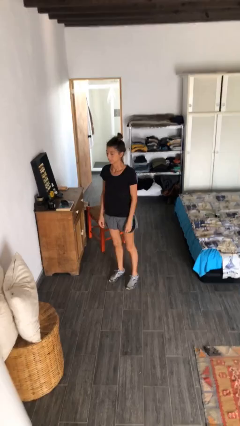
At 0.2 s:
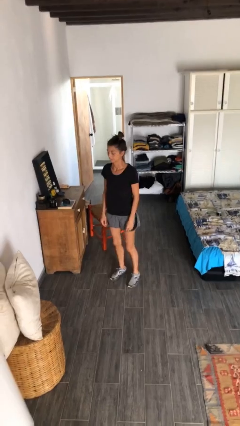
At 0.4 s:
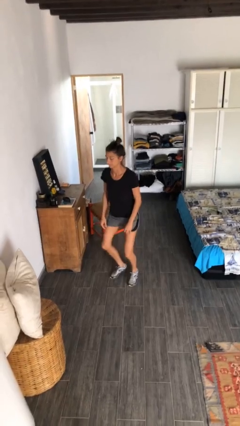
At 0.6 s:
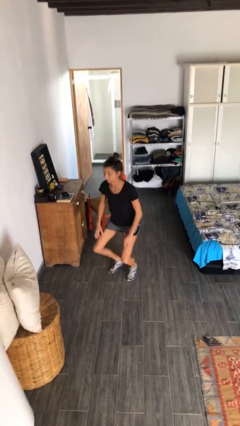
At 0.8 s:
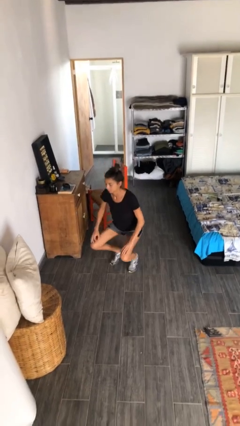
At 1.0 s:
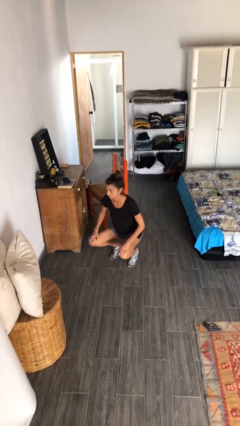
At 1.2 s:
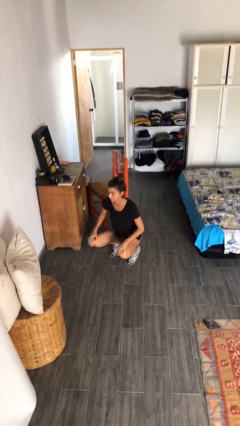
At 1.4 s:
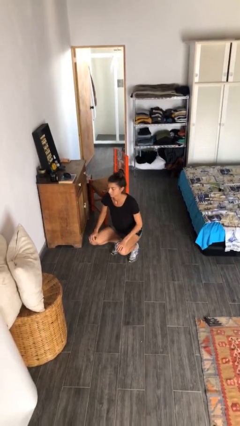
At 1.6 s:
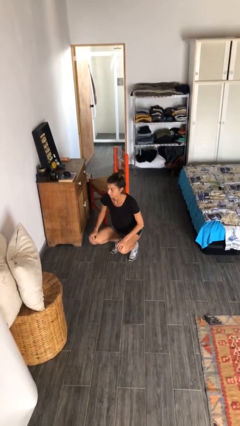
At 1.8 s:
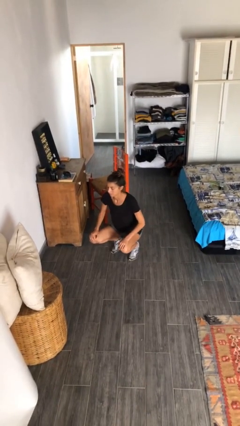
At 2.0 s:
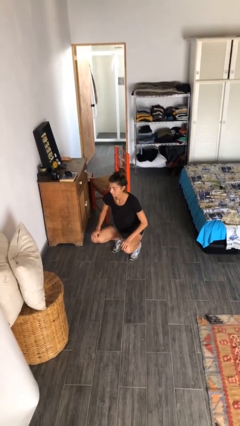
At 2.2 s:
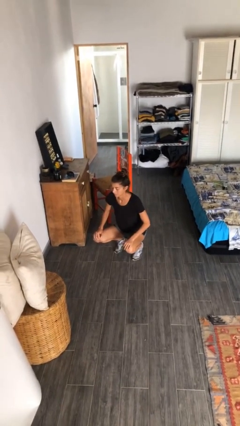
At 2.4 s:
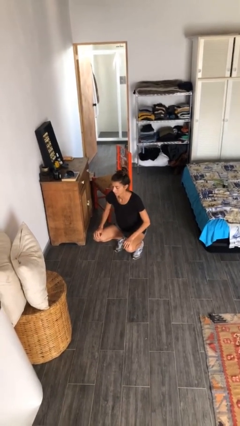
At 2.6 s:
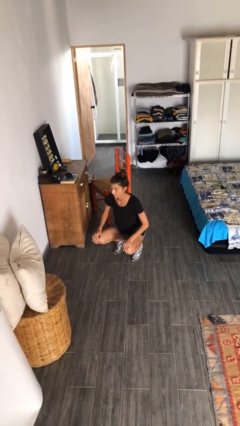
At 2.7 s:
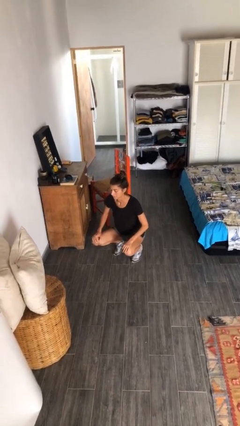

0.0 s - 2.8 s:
person squats

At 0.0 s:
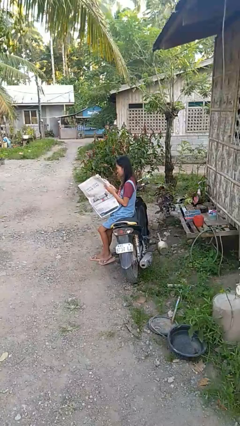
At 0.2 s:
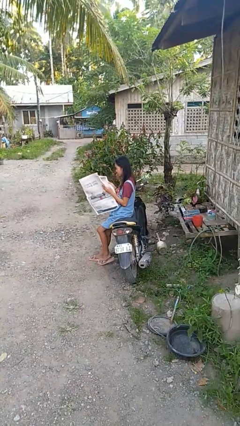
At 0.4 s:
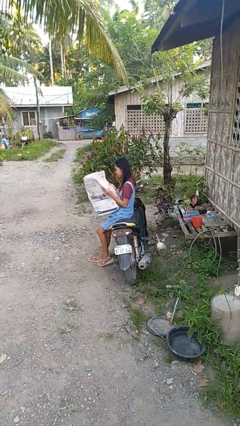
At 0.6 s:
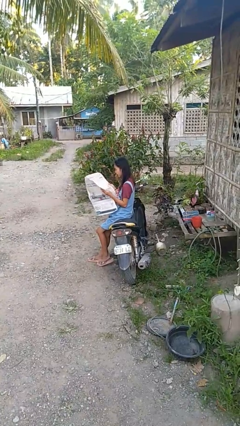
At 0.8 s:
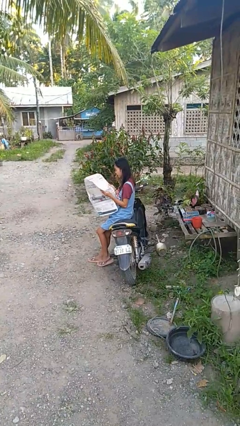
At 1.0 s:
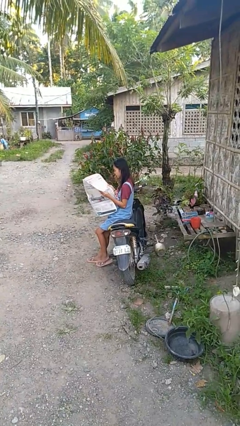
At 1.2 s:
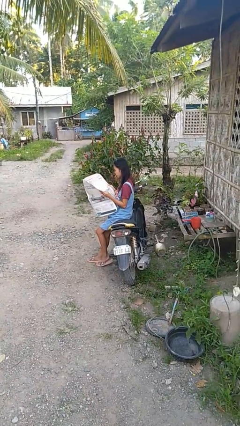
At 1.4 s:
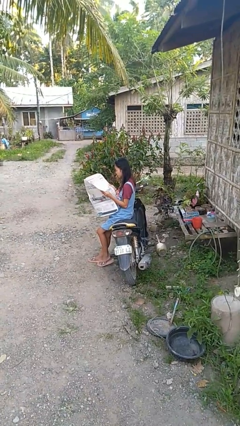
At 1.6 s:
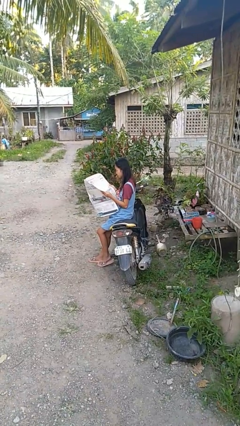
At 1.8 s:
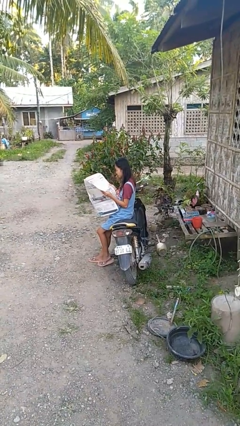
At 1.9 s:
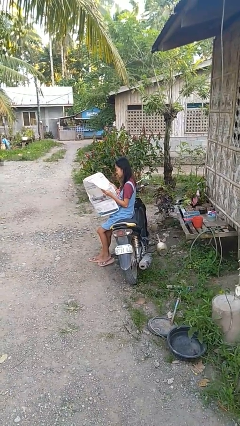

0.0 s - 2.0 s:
person reads newspaper

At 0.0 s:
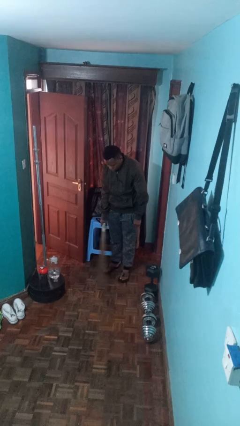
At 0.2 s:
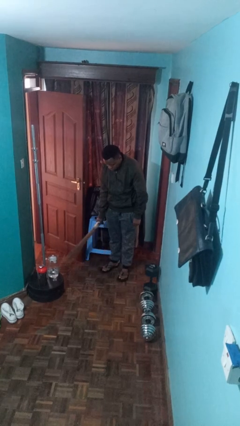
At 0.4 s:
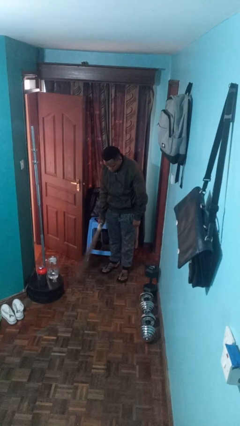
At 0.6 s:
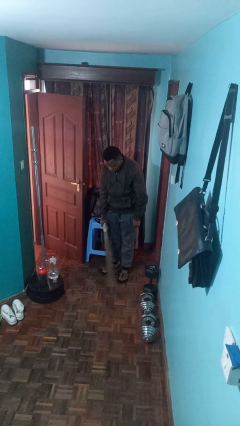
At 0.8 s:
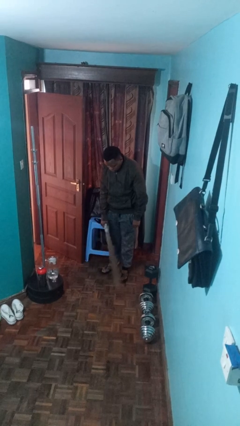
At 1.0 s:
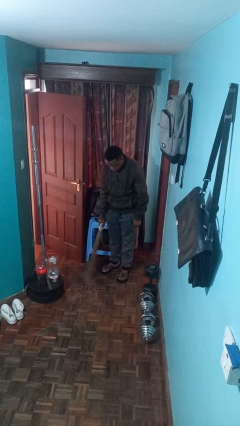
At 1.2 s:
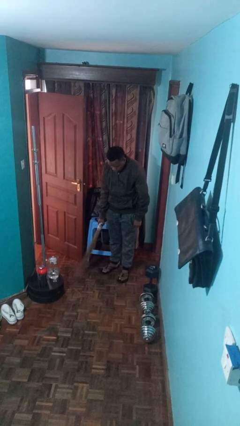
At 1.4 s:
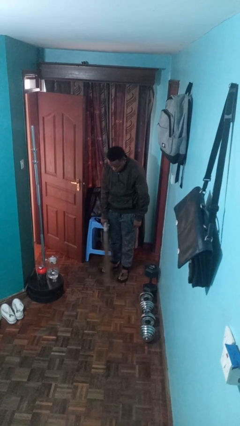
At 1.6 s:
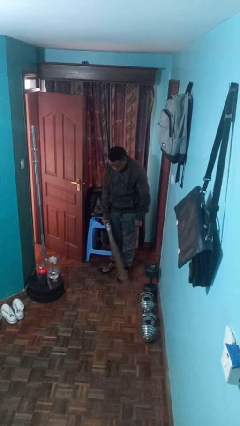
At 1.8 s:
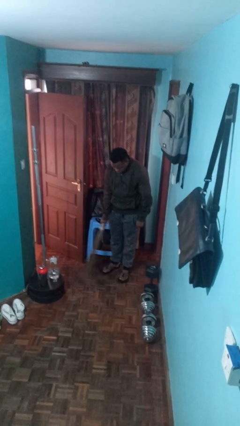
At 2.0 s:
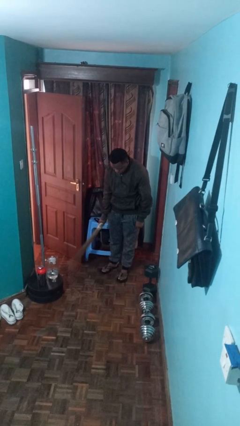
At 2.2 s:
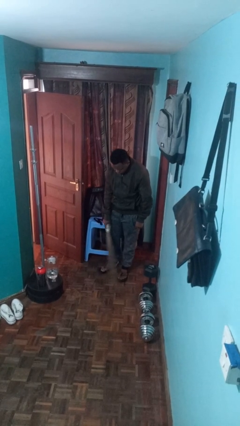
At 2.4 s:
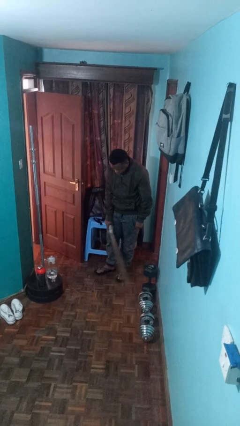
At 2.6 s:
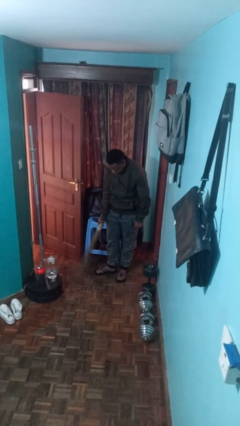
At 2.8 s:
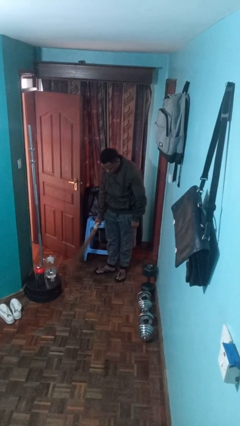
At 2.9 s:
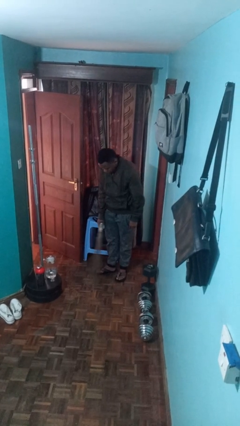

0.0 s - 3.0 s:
person sweeps floor

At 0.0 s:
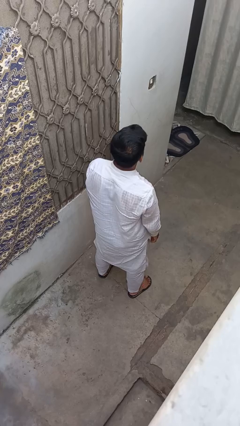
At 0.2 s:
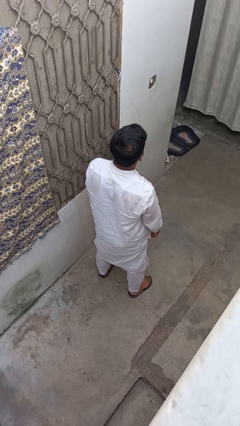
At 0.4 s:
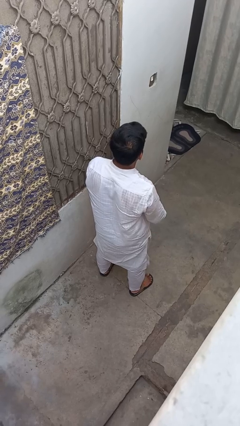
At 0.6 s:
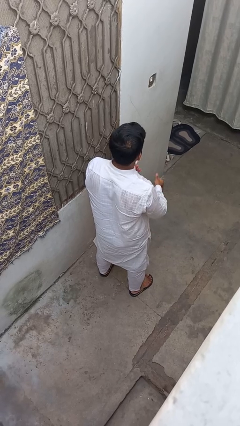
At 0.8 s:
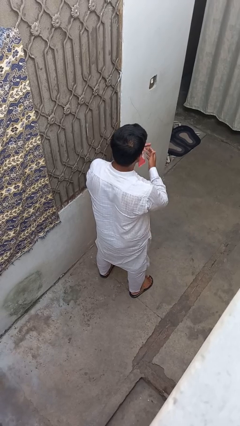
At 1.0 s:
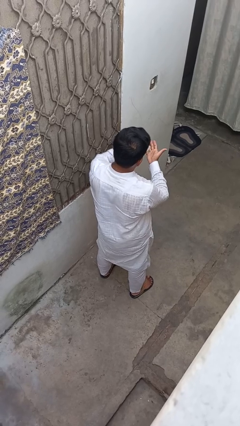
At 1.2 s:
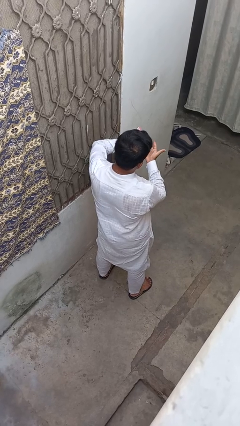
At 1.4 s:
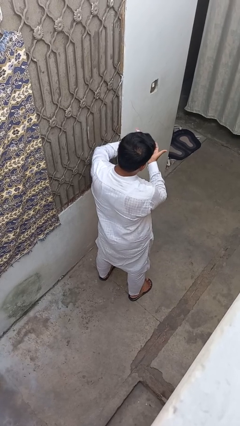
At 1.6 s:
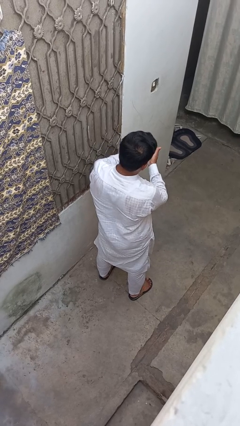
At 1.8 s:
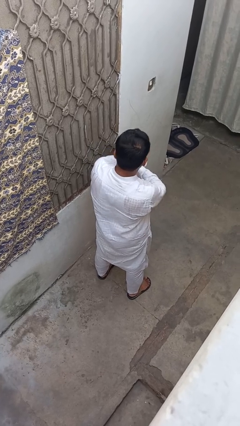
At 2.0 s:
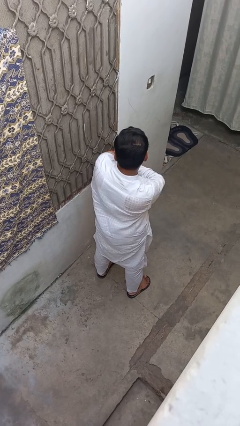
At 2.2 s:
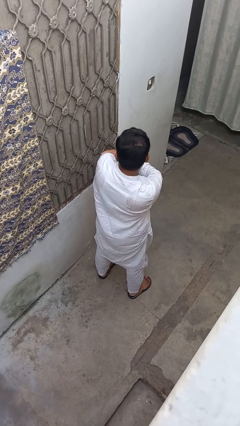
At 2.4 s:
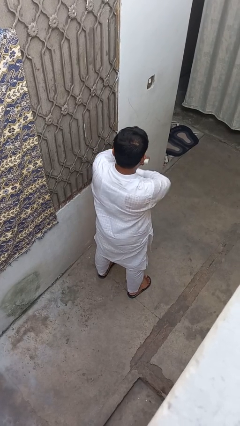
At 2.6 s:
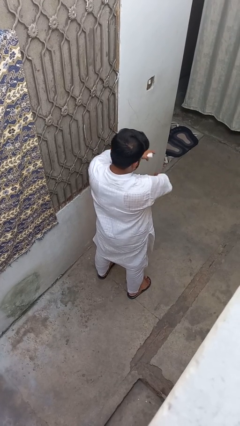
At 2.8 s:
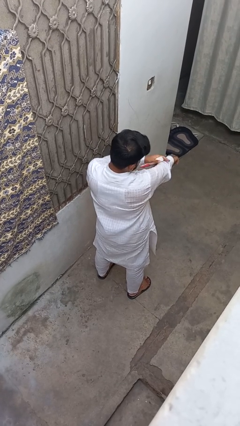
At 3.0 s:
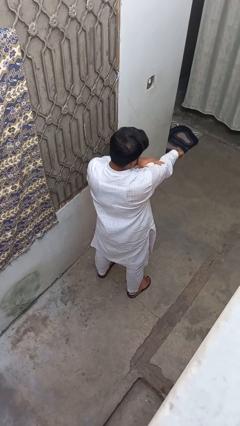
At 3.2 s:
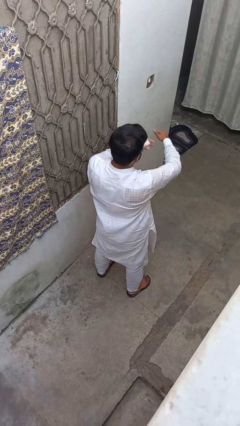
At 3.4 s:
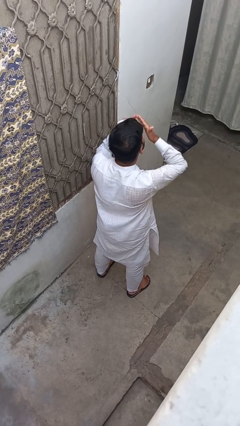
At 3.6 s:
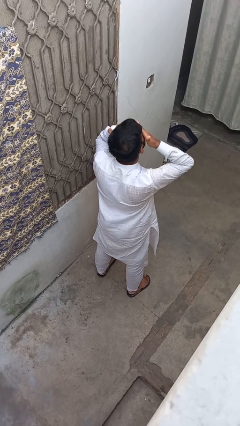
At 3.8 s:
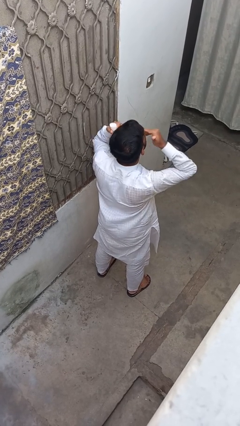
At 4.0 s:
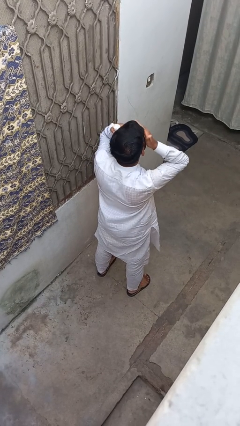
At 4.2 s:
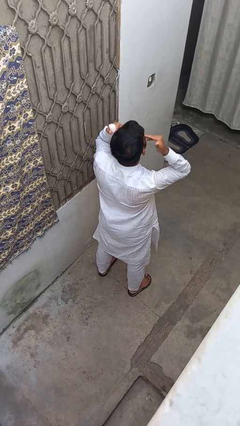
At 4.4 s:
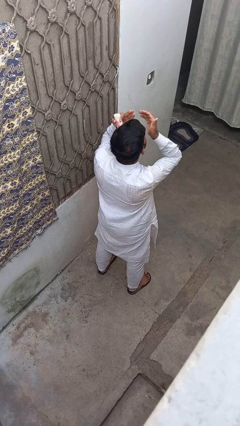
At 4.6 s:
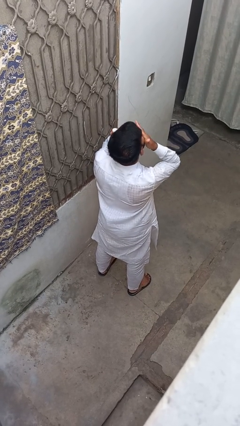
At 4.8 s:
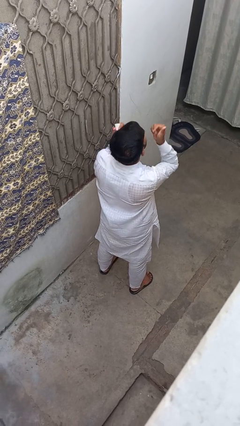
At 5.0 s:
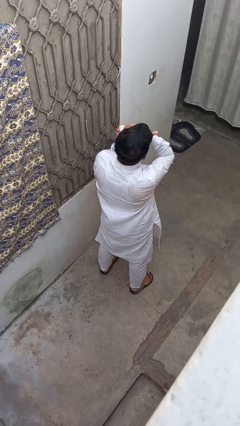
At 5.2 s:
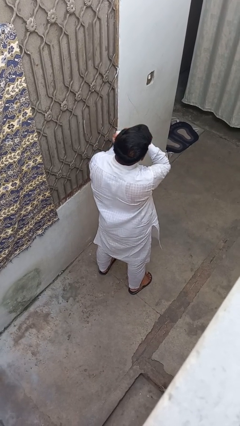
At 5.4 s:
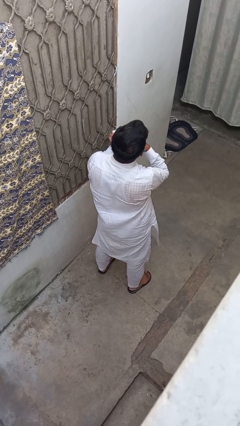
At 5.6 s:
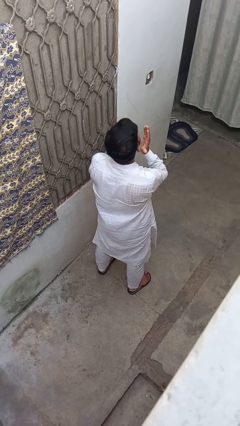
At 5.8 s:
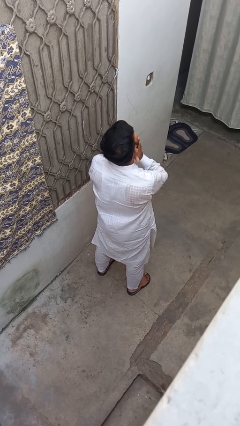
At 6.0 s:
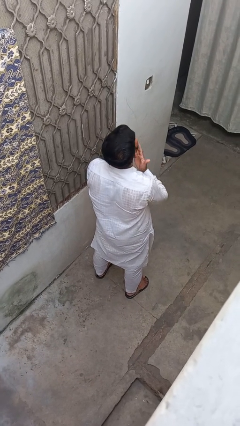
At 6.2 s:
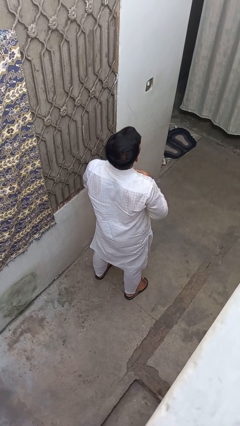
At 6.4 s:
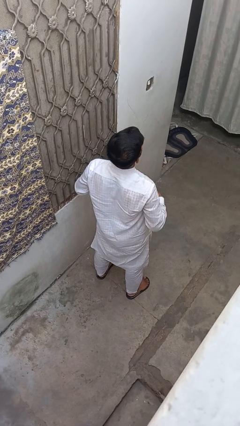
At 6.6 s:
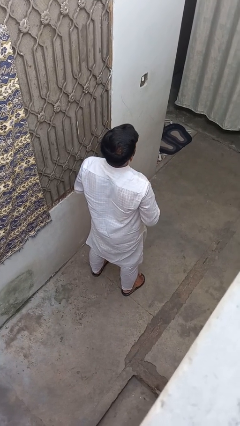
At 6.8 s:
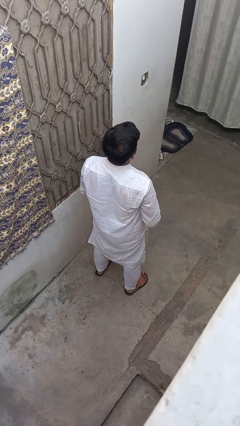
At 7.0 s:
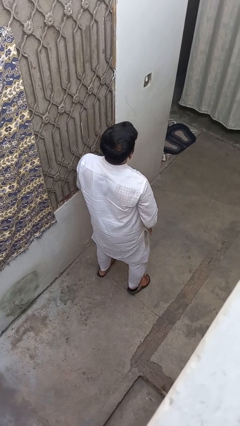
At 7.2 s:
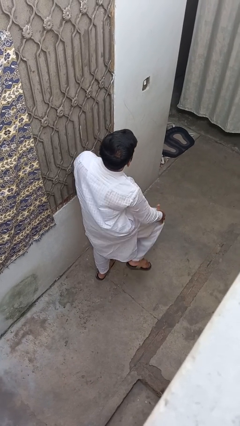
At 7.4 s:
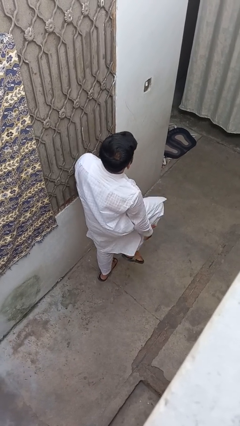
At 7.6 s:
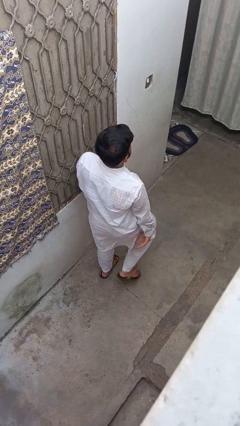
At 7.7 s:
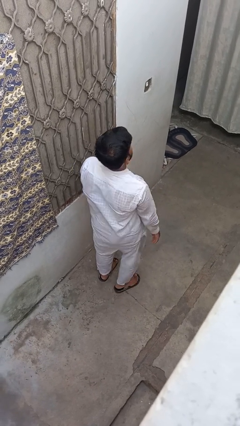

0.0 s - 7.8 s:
person applies sunscreen

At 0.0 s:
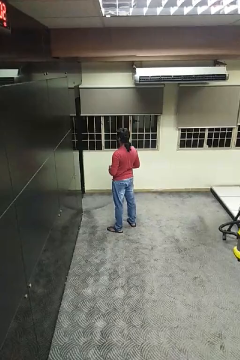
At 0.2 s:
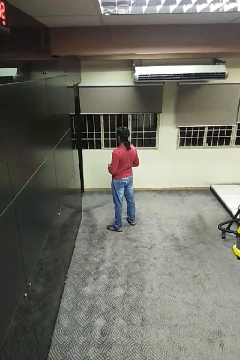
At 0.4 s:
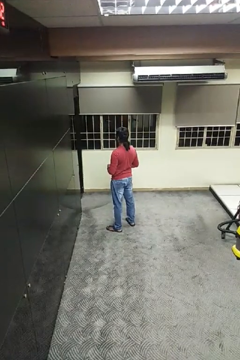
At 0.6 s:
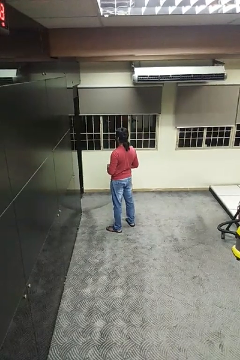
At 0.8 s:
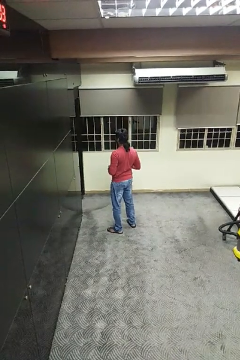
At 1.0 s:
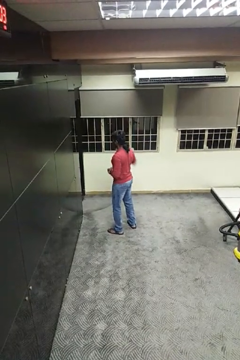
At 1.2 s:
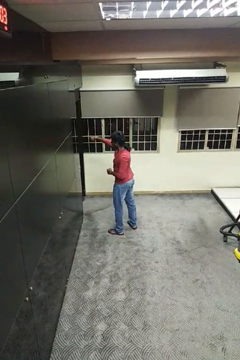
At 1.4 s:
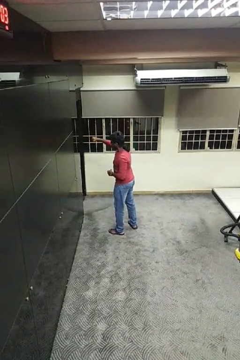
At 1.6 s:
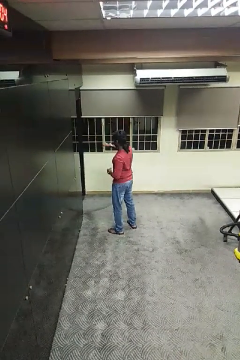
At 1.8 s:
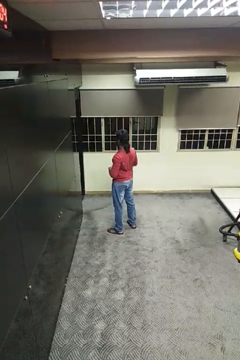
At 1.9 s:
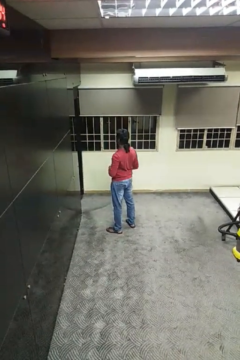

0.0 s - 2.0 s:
person punches

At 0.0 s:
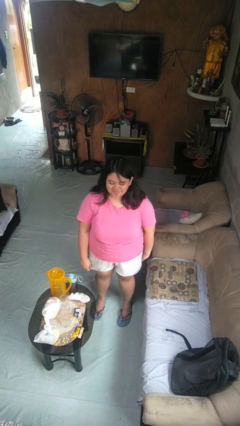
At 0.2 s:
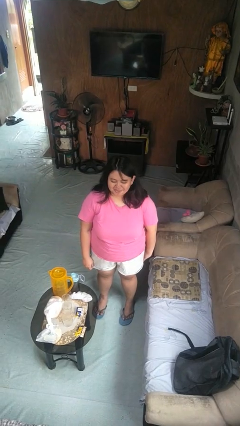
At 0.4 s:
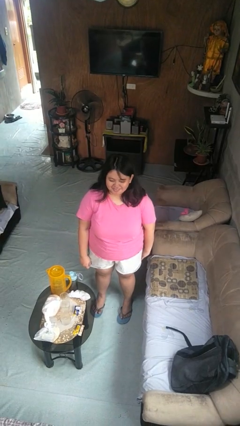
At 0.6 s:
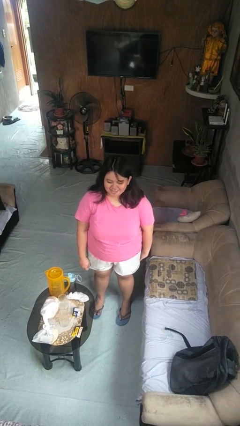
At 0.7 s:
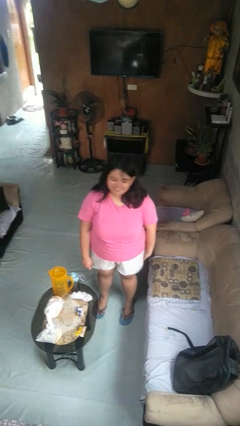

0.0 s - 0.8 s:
person shakes head
